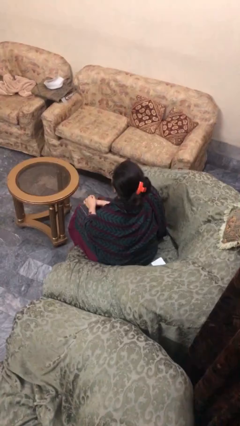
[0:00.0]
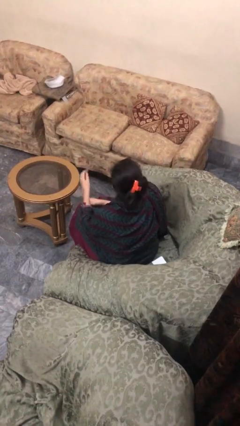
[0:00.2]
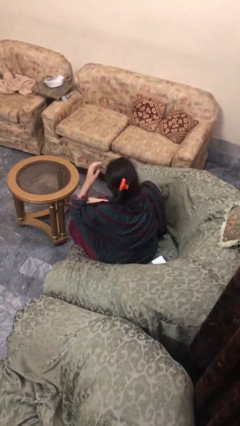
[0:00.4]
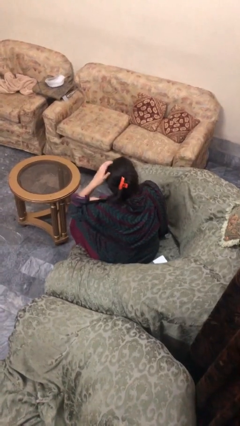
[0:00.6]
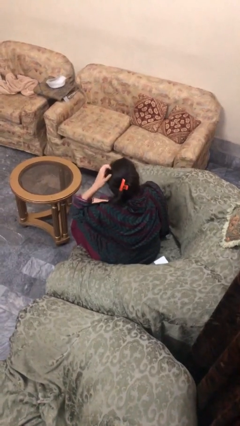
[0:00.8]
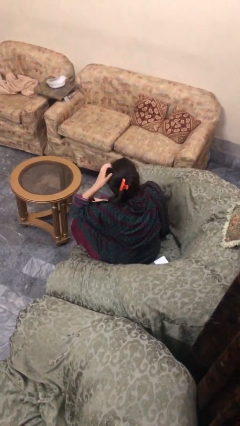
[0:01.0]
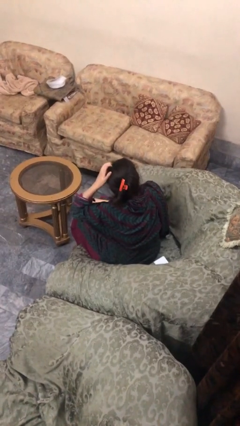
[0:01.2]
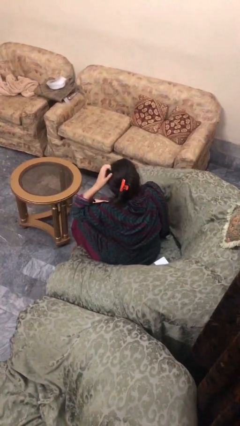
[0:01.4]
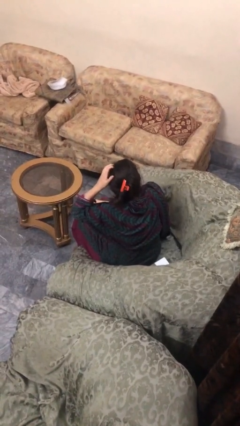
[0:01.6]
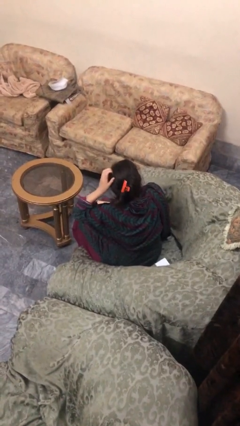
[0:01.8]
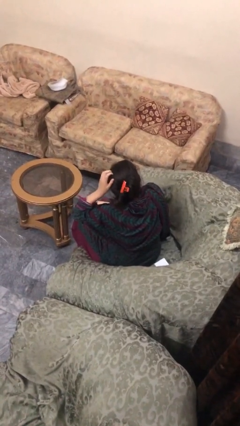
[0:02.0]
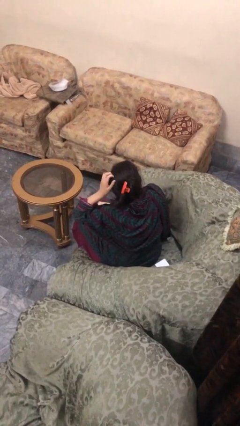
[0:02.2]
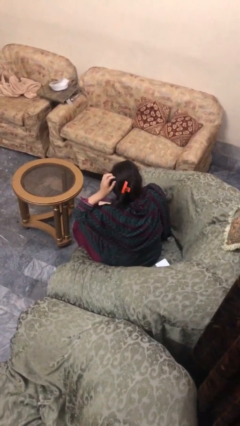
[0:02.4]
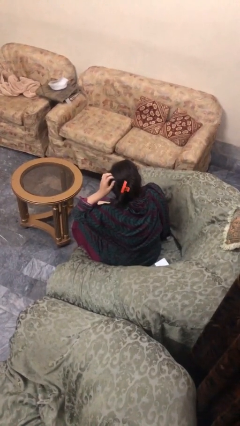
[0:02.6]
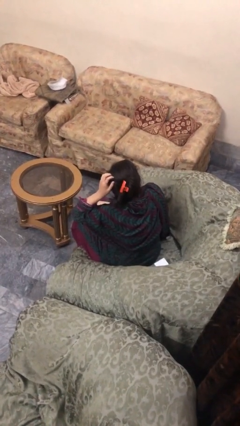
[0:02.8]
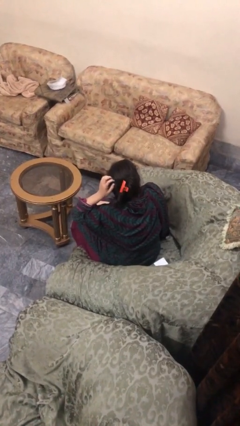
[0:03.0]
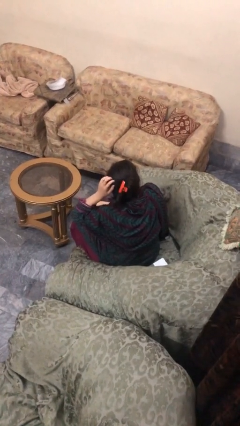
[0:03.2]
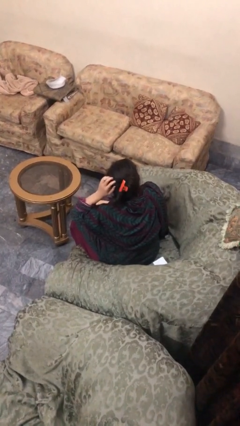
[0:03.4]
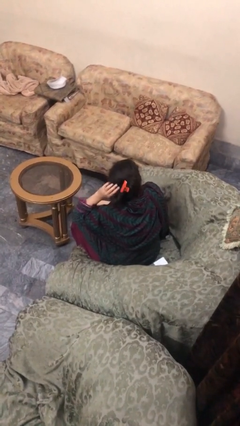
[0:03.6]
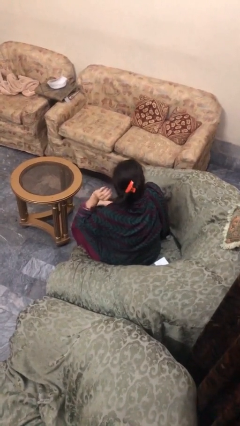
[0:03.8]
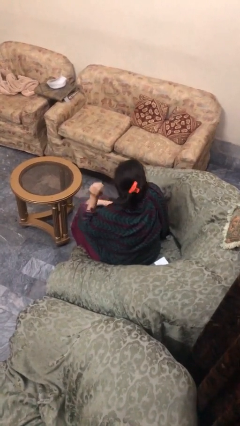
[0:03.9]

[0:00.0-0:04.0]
person strokes hair

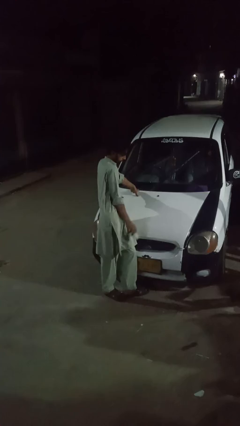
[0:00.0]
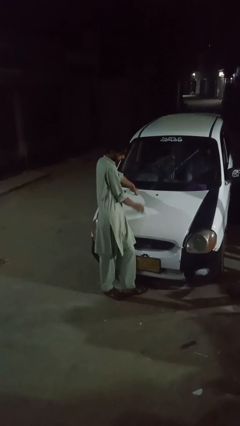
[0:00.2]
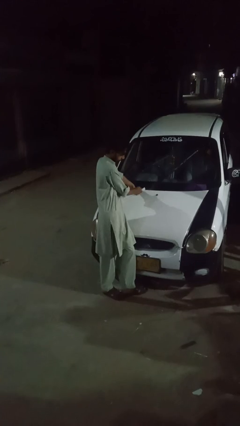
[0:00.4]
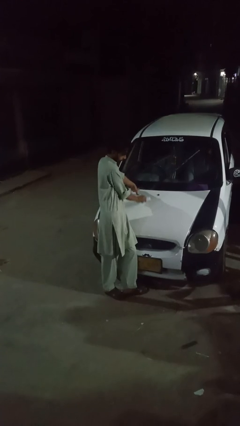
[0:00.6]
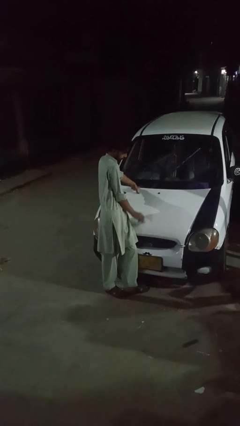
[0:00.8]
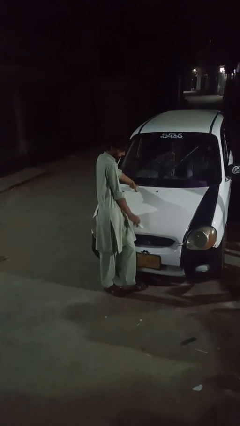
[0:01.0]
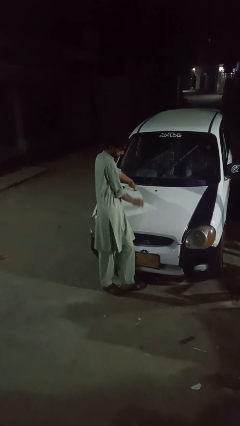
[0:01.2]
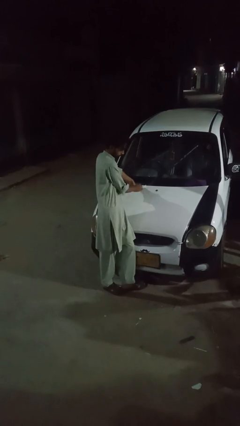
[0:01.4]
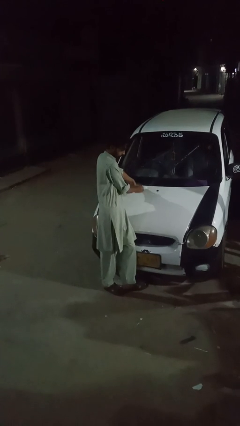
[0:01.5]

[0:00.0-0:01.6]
person polishes car with rag

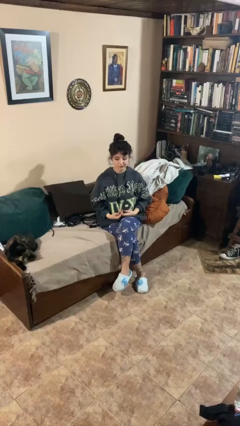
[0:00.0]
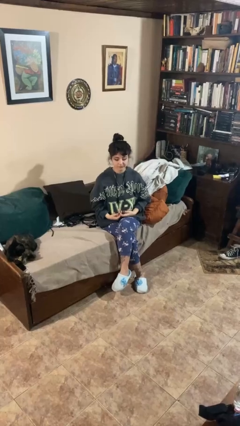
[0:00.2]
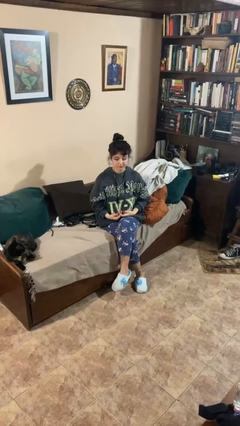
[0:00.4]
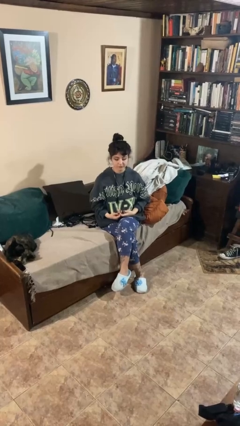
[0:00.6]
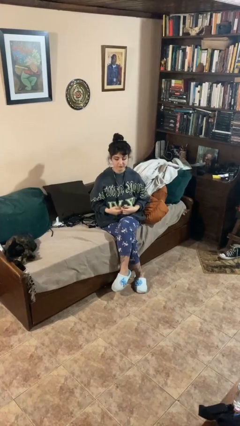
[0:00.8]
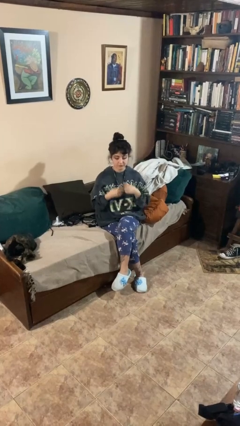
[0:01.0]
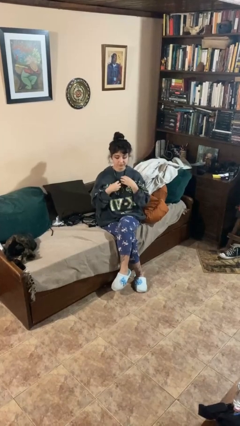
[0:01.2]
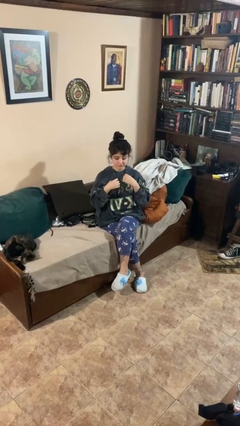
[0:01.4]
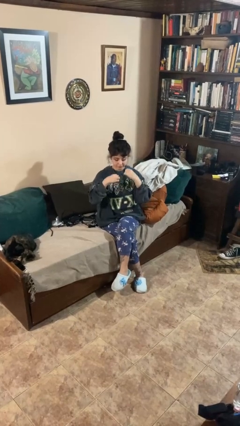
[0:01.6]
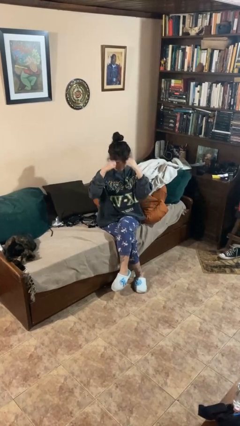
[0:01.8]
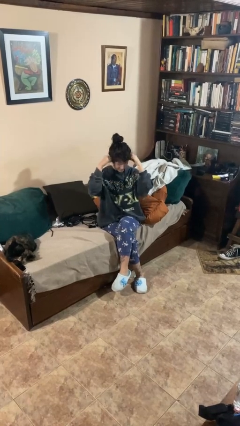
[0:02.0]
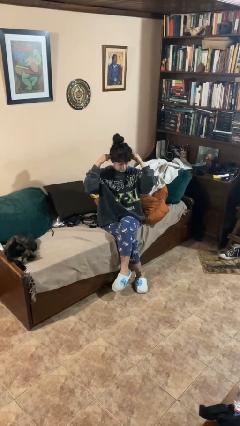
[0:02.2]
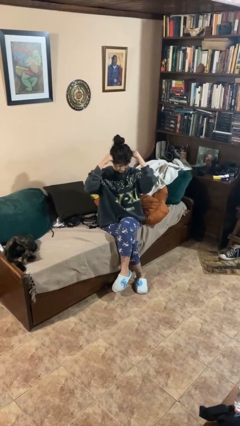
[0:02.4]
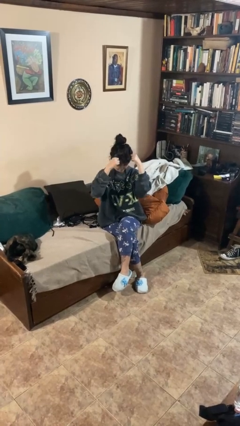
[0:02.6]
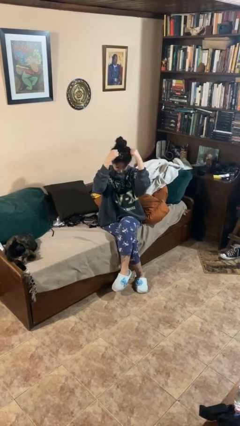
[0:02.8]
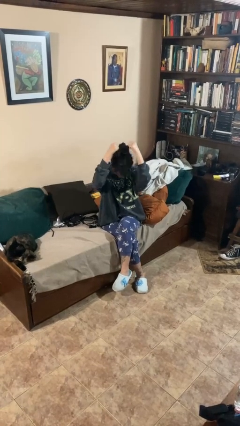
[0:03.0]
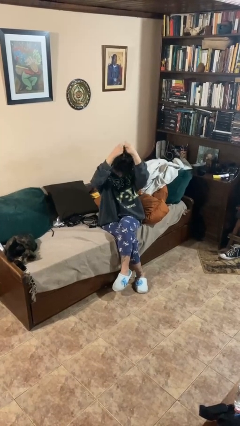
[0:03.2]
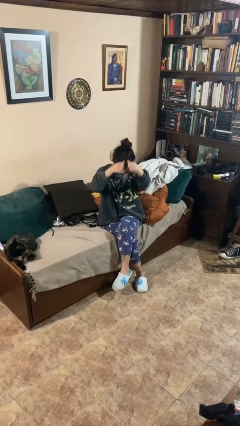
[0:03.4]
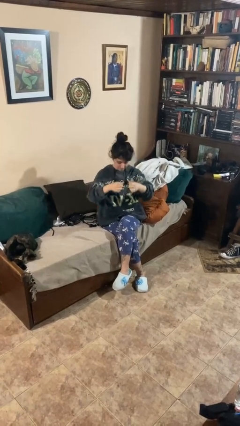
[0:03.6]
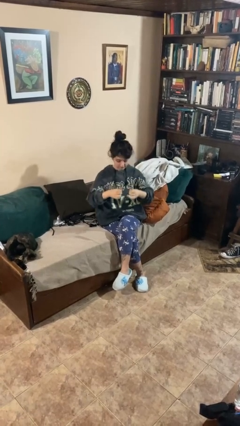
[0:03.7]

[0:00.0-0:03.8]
person takes off necklace

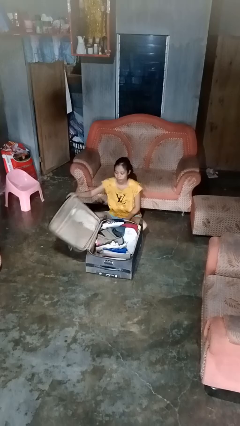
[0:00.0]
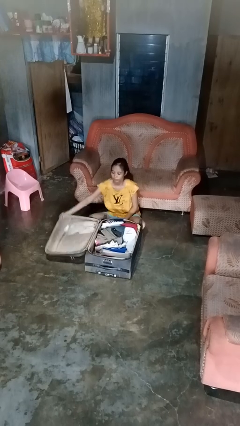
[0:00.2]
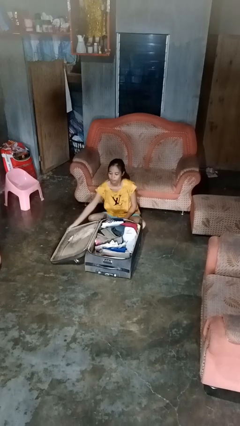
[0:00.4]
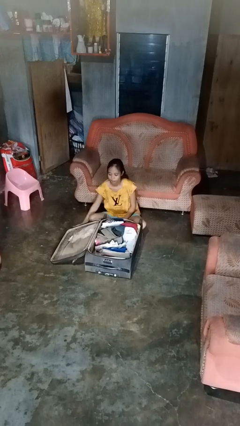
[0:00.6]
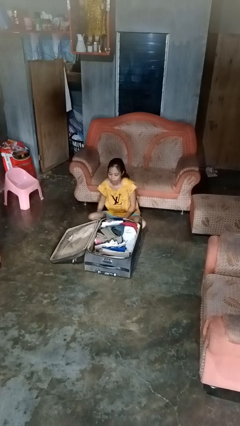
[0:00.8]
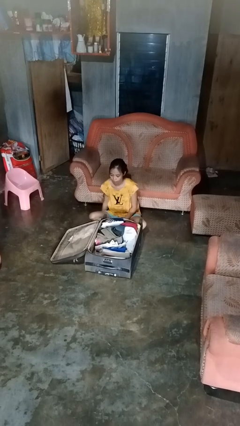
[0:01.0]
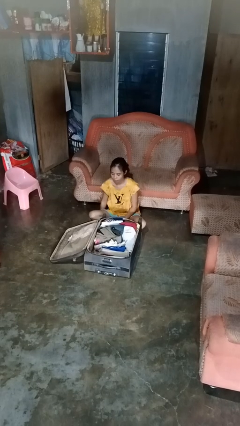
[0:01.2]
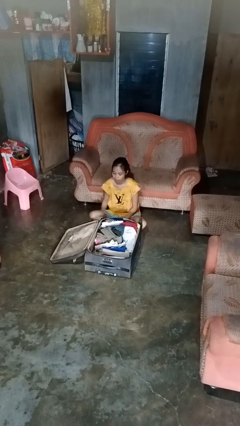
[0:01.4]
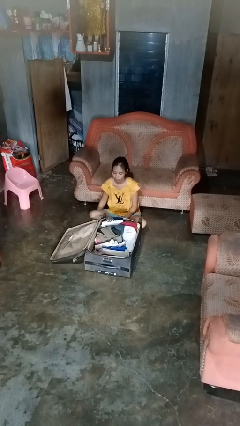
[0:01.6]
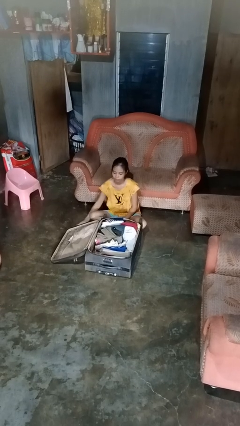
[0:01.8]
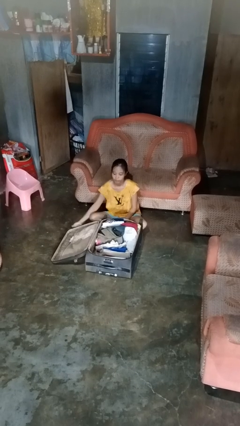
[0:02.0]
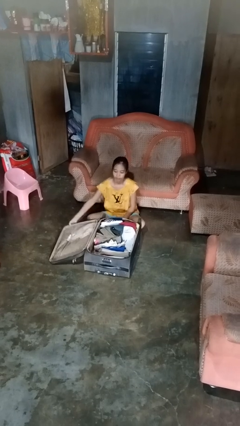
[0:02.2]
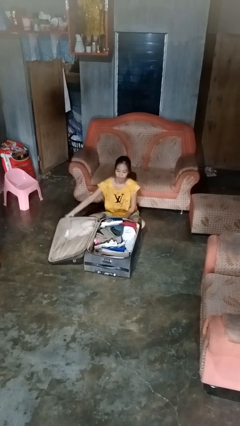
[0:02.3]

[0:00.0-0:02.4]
person opens suitcase

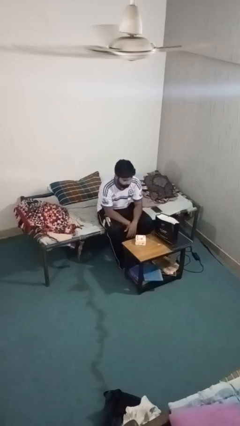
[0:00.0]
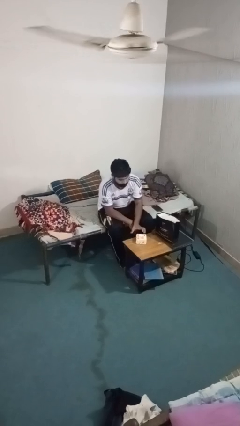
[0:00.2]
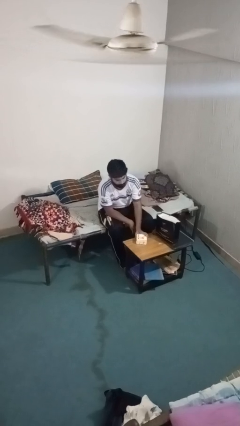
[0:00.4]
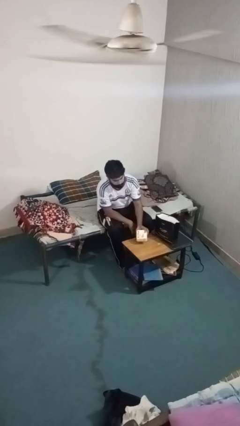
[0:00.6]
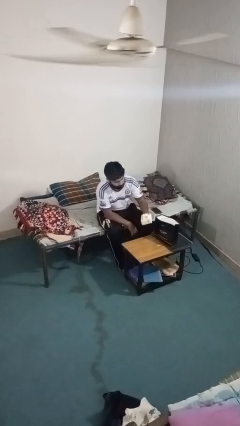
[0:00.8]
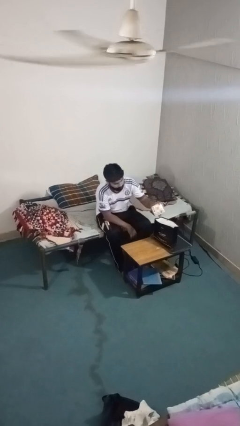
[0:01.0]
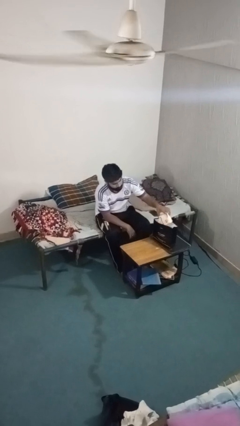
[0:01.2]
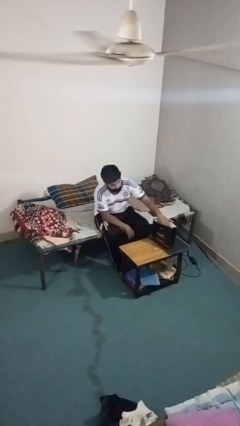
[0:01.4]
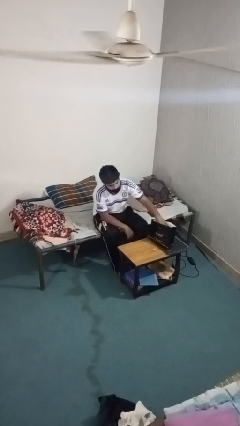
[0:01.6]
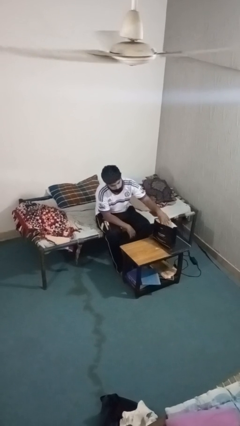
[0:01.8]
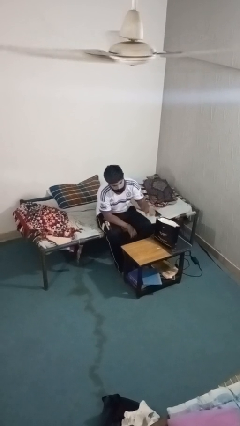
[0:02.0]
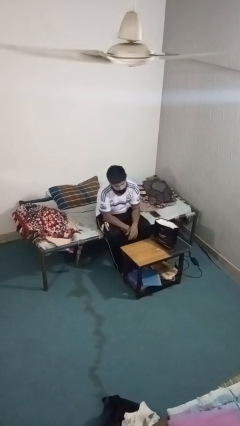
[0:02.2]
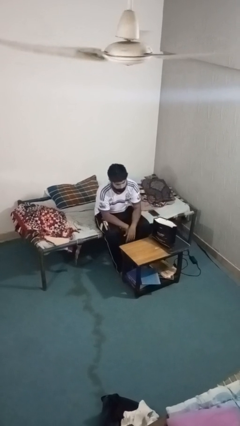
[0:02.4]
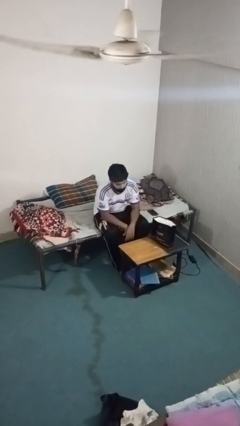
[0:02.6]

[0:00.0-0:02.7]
person puts object into bag

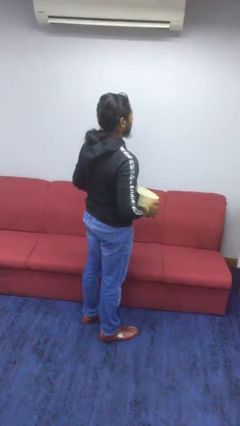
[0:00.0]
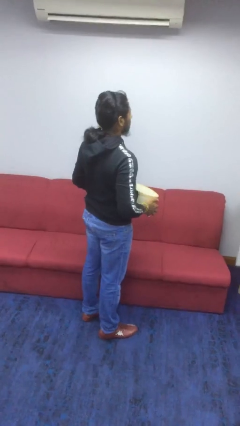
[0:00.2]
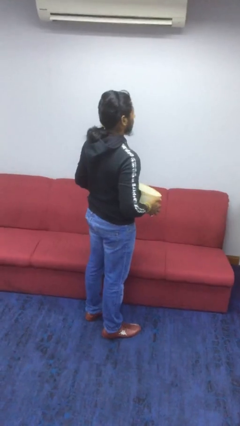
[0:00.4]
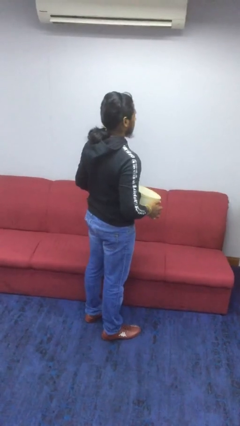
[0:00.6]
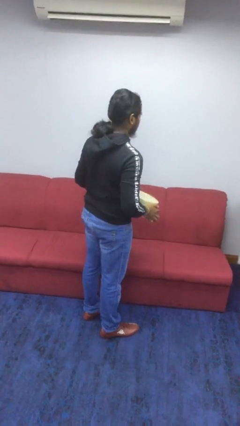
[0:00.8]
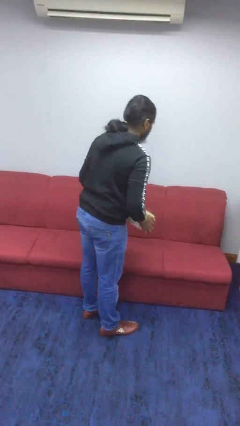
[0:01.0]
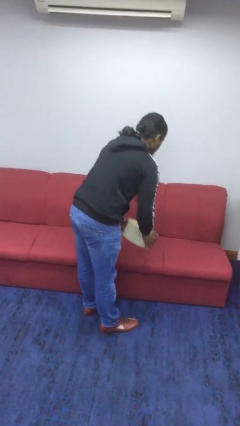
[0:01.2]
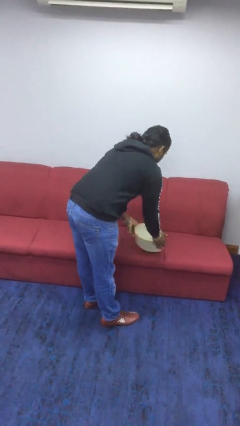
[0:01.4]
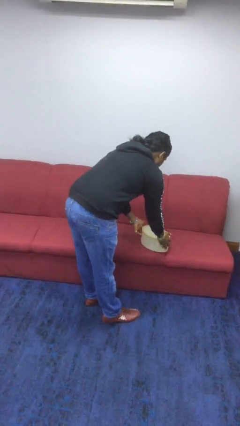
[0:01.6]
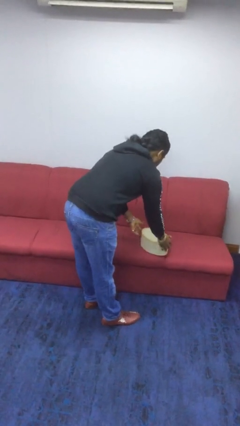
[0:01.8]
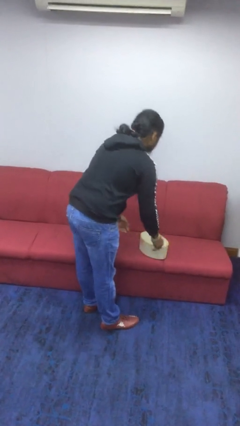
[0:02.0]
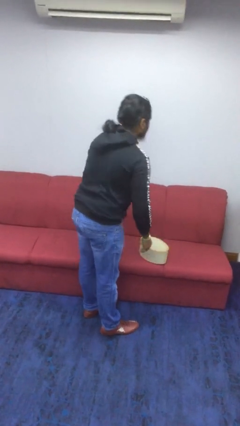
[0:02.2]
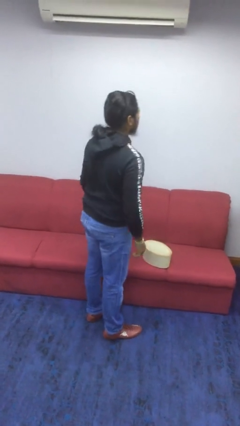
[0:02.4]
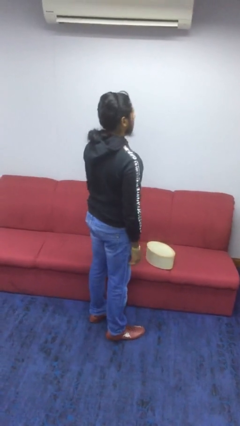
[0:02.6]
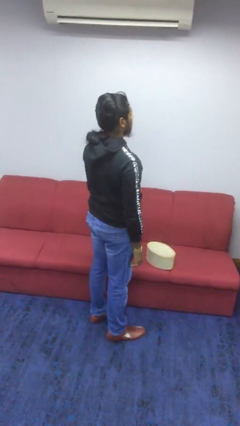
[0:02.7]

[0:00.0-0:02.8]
person puts down object on couch

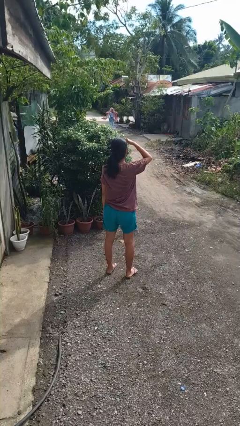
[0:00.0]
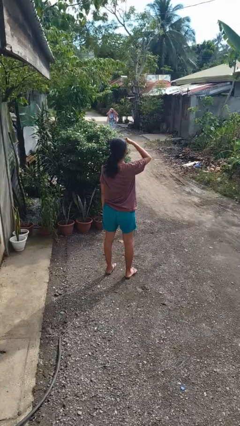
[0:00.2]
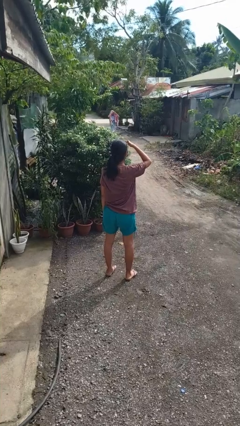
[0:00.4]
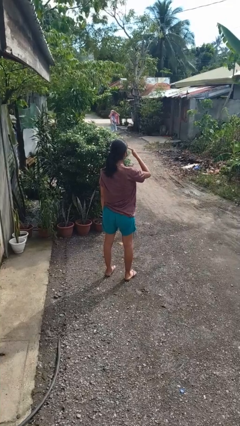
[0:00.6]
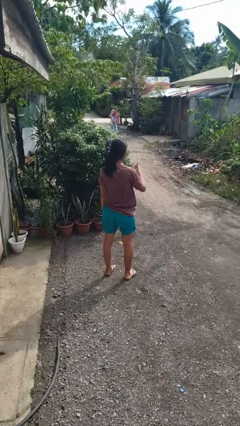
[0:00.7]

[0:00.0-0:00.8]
person shades eyes
